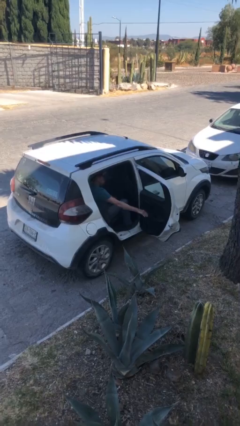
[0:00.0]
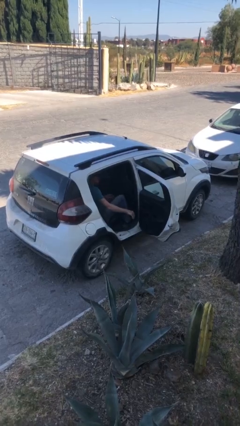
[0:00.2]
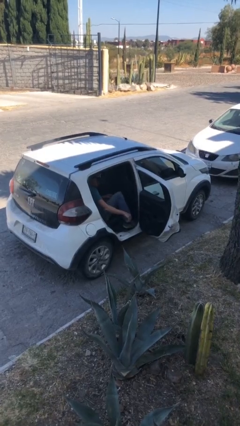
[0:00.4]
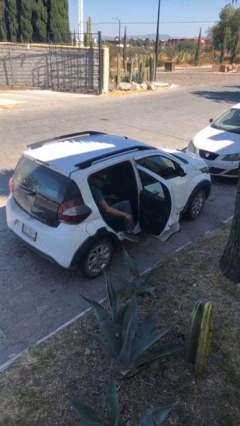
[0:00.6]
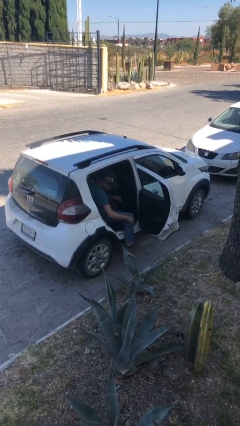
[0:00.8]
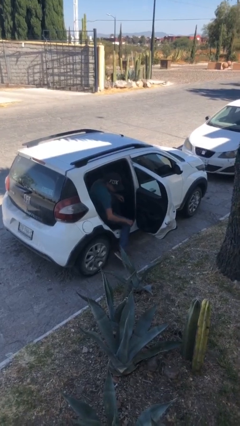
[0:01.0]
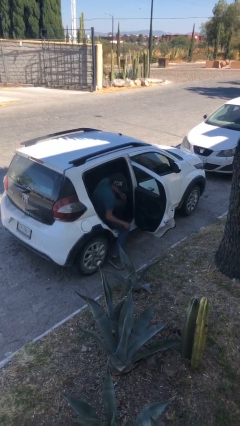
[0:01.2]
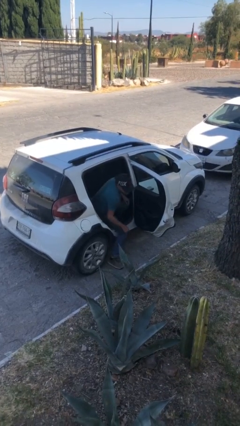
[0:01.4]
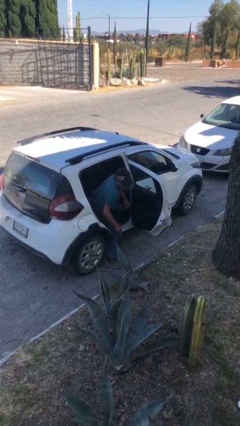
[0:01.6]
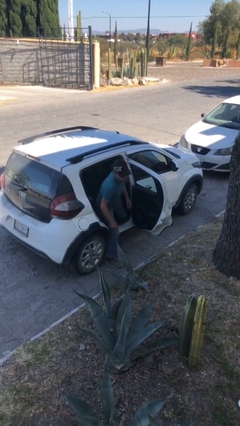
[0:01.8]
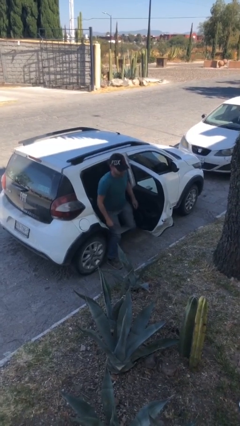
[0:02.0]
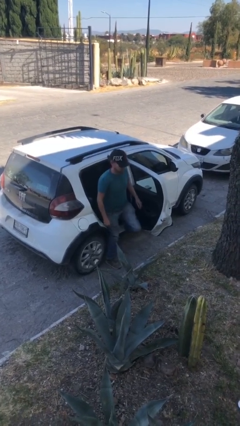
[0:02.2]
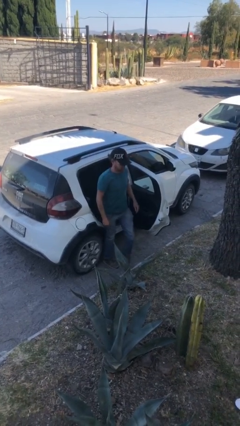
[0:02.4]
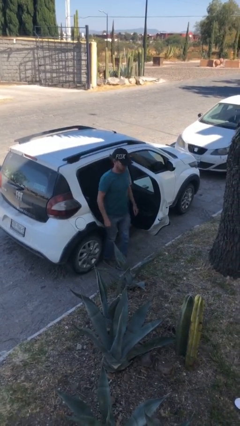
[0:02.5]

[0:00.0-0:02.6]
person exits car

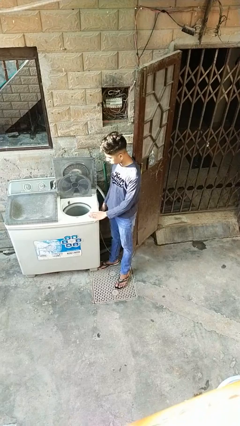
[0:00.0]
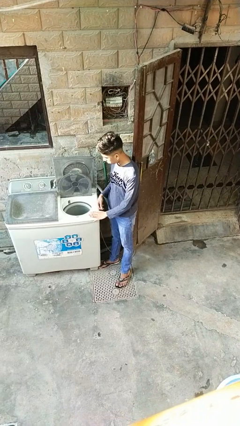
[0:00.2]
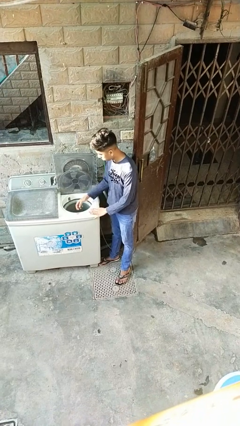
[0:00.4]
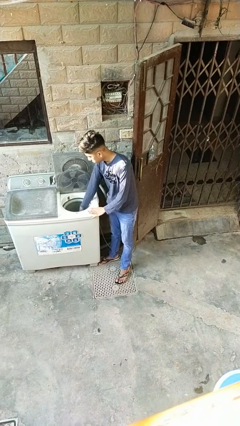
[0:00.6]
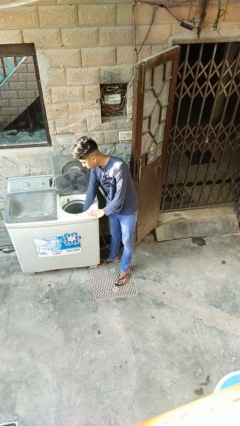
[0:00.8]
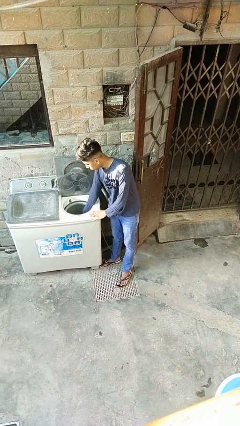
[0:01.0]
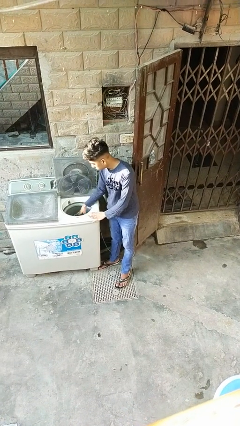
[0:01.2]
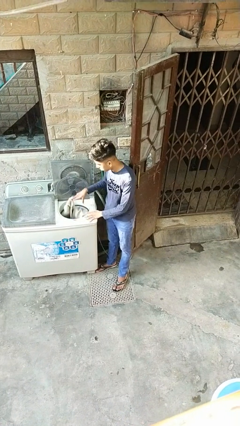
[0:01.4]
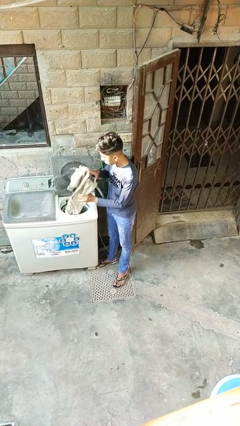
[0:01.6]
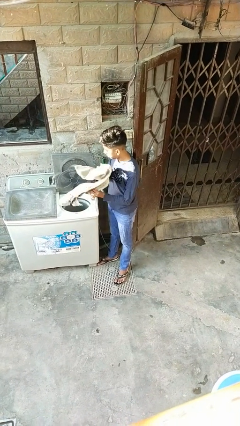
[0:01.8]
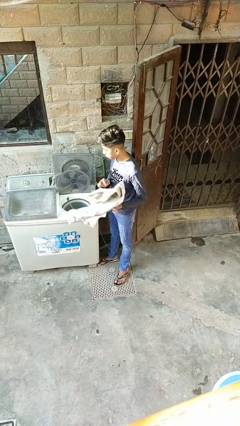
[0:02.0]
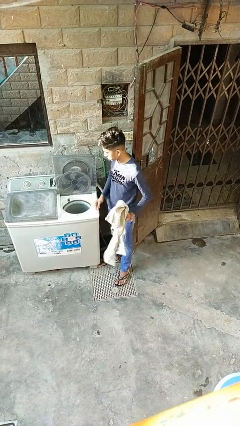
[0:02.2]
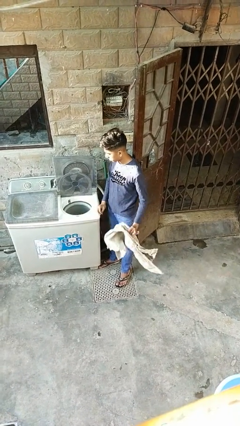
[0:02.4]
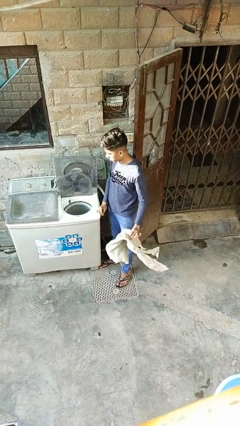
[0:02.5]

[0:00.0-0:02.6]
person unloads dryer

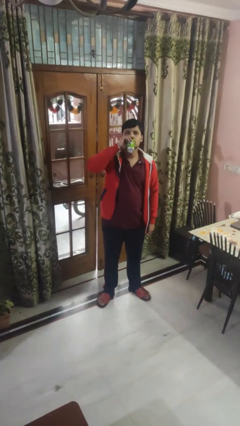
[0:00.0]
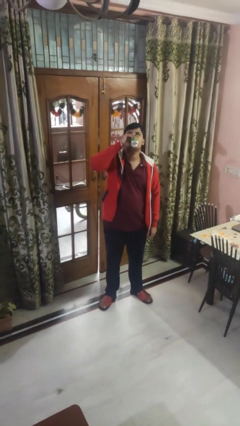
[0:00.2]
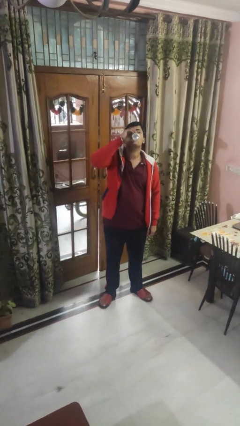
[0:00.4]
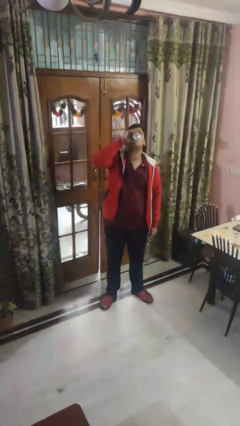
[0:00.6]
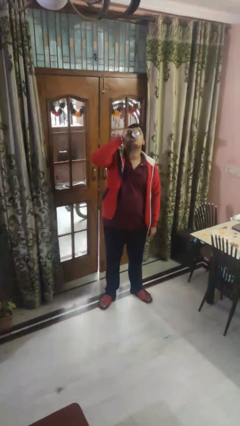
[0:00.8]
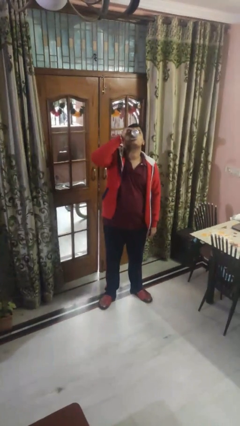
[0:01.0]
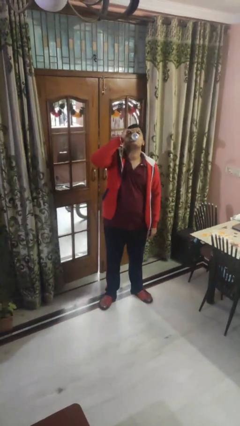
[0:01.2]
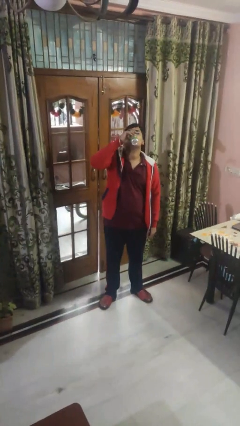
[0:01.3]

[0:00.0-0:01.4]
person drinks from beverage can

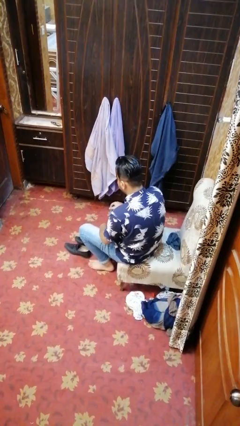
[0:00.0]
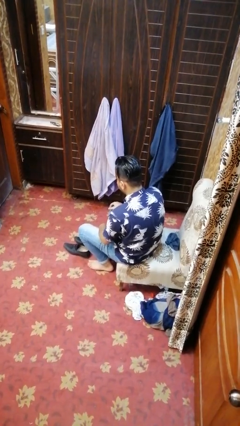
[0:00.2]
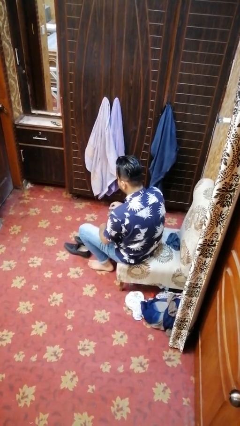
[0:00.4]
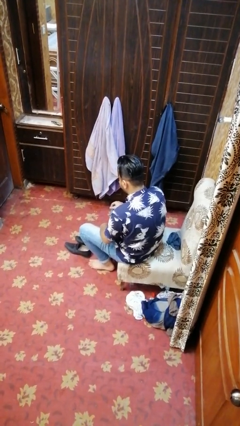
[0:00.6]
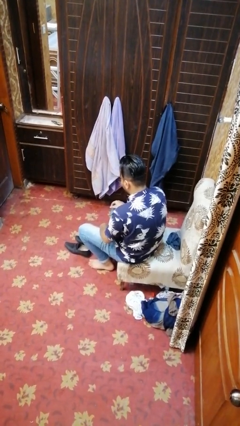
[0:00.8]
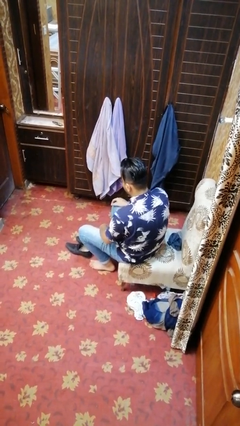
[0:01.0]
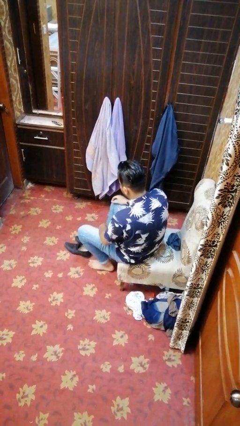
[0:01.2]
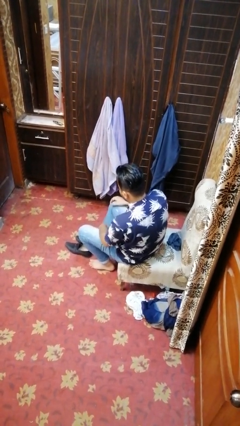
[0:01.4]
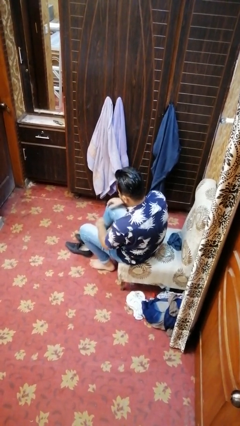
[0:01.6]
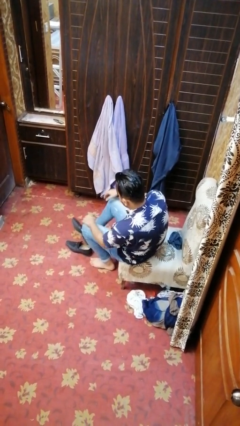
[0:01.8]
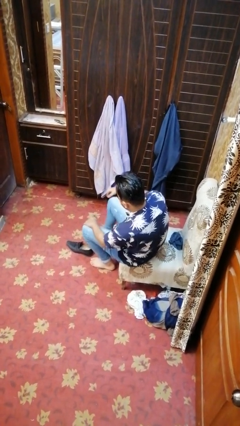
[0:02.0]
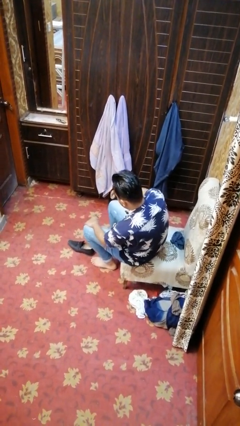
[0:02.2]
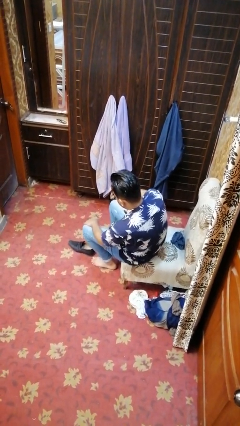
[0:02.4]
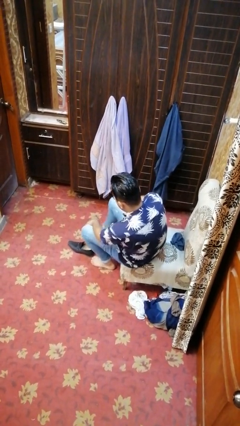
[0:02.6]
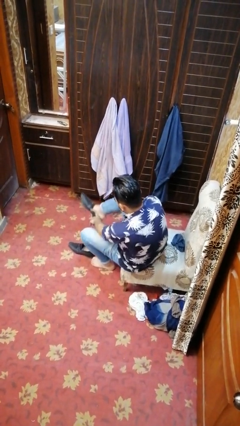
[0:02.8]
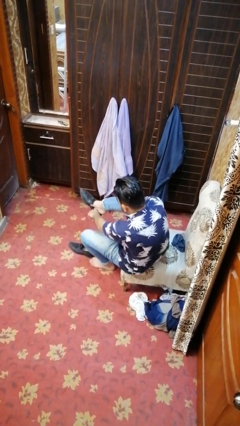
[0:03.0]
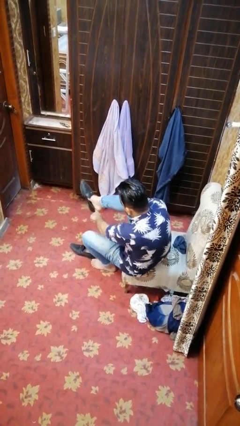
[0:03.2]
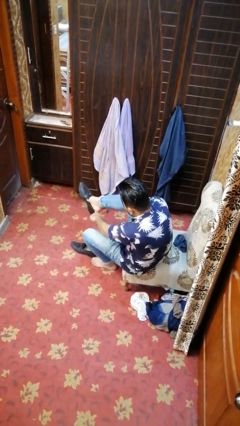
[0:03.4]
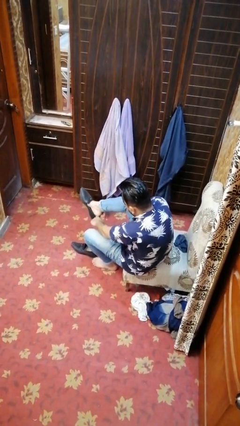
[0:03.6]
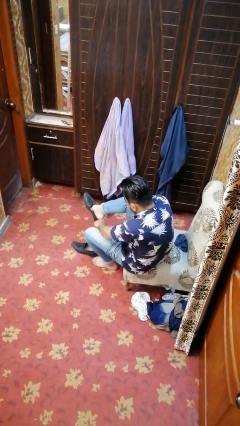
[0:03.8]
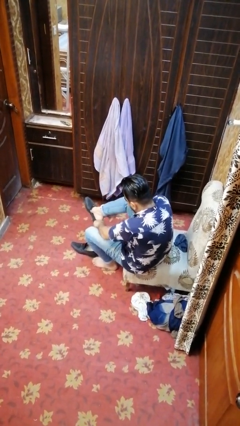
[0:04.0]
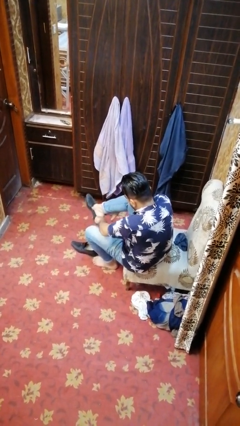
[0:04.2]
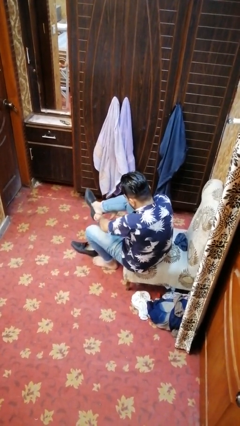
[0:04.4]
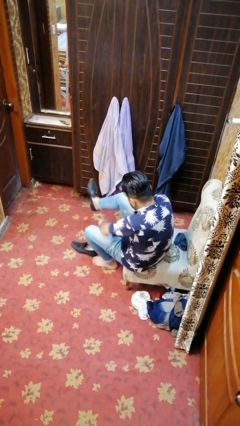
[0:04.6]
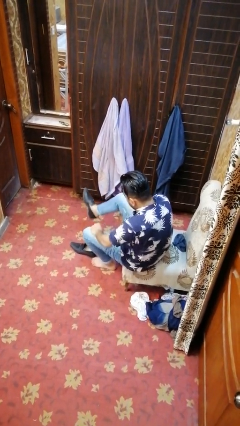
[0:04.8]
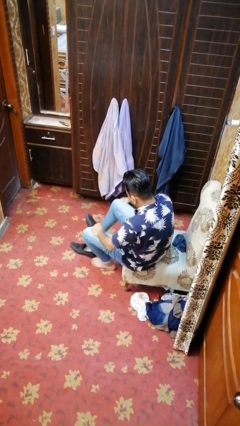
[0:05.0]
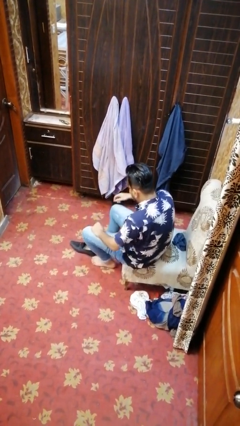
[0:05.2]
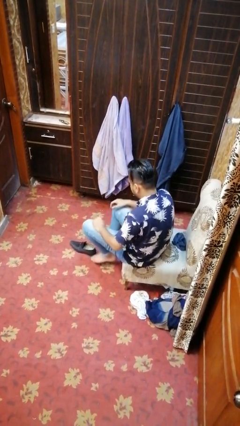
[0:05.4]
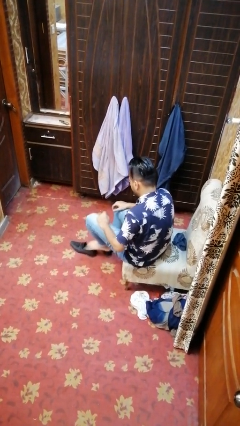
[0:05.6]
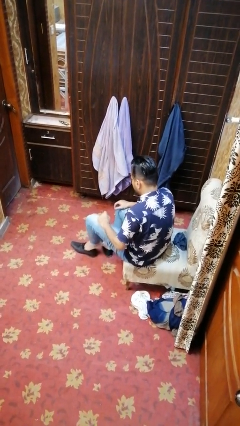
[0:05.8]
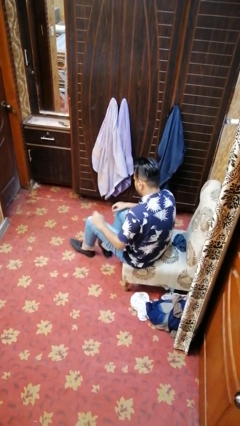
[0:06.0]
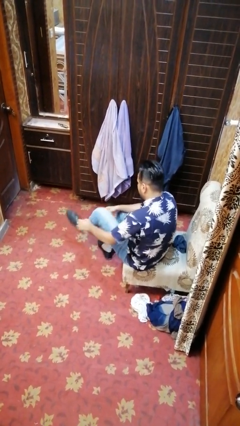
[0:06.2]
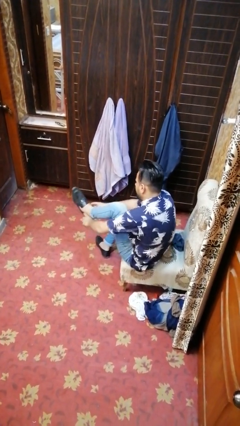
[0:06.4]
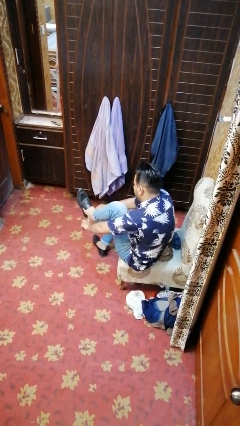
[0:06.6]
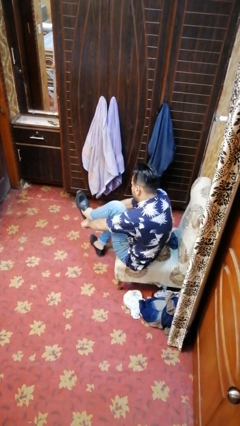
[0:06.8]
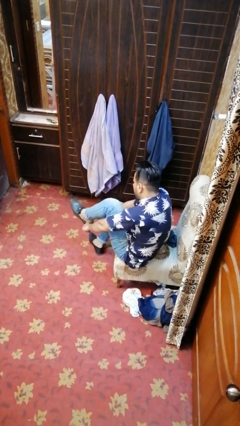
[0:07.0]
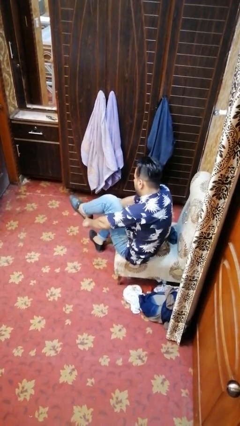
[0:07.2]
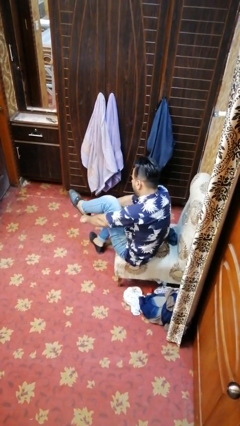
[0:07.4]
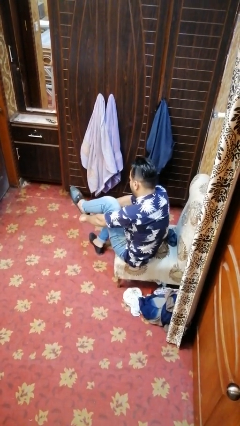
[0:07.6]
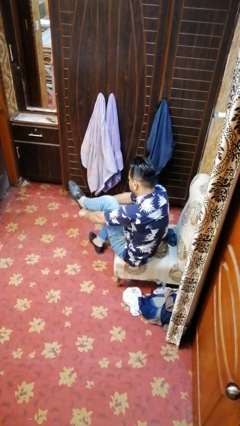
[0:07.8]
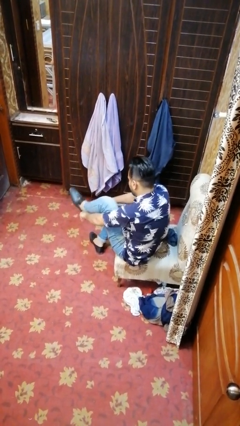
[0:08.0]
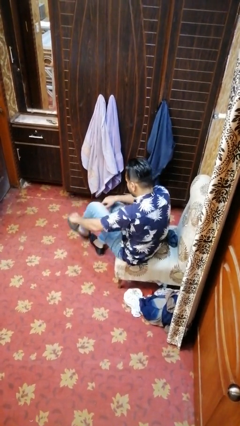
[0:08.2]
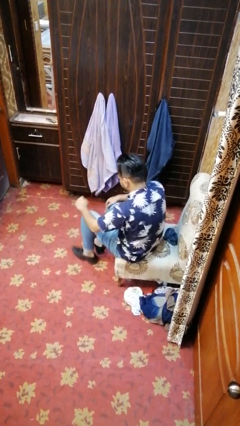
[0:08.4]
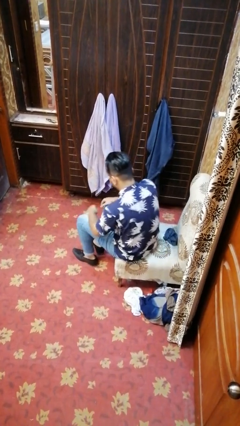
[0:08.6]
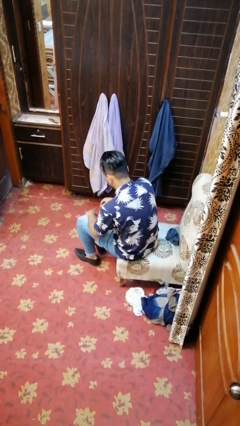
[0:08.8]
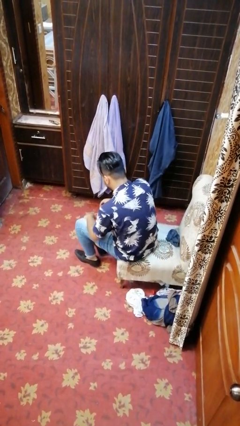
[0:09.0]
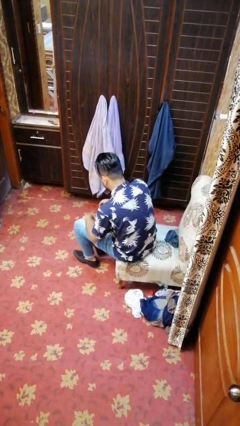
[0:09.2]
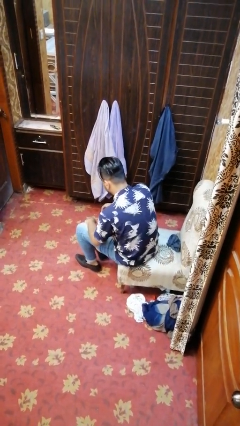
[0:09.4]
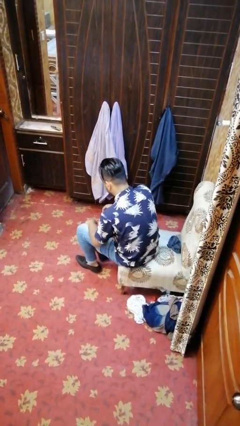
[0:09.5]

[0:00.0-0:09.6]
person puts on shoes

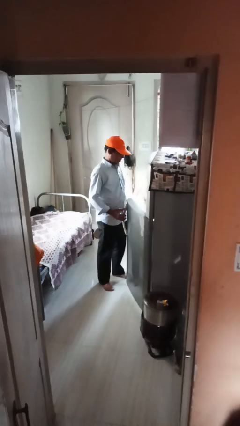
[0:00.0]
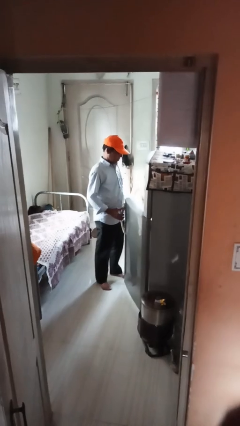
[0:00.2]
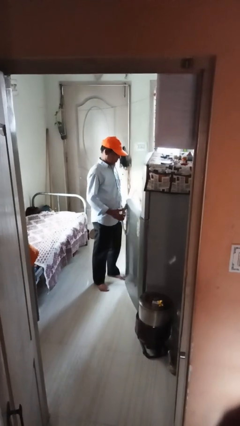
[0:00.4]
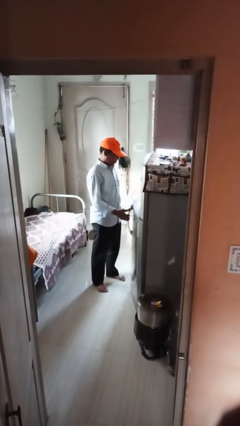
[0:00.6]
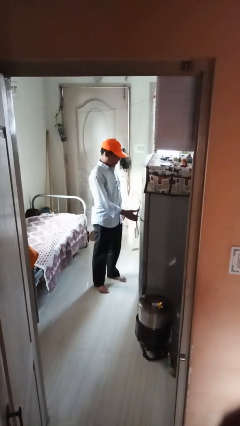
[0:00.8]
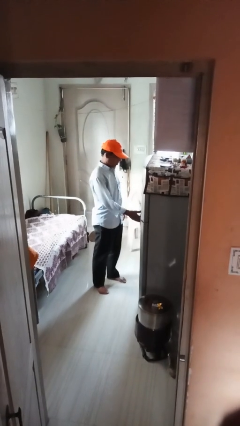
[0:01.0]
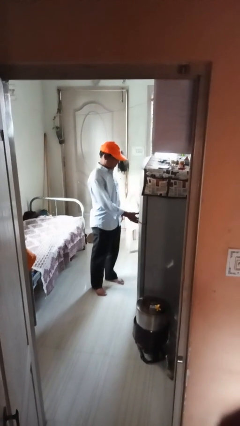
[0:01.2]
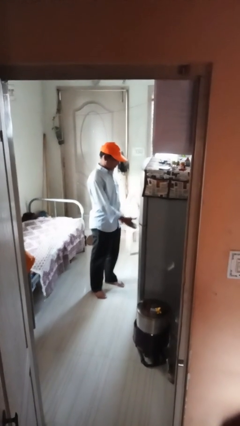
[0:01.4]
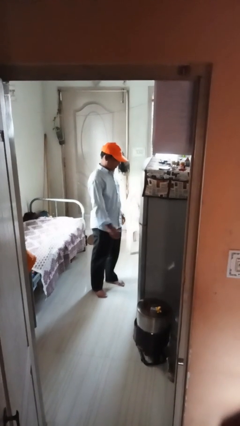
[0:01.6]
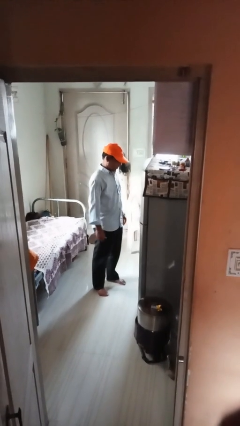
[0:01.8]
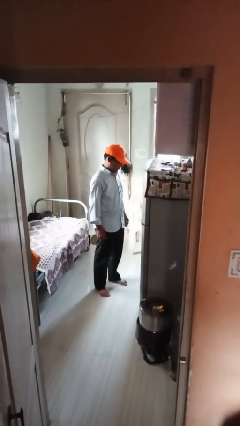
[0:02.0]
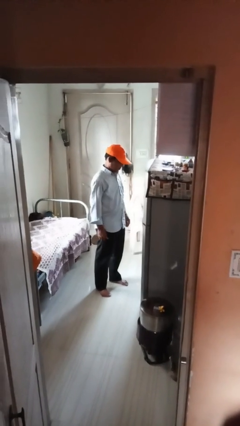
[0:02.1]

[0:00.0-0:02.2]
person closes refrigerator
